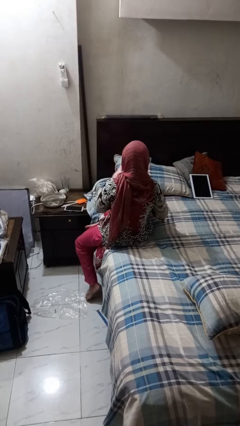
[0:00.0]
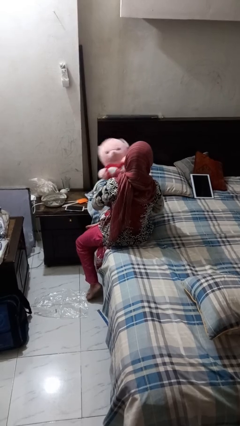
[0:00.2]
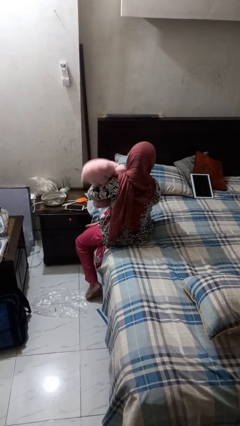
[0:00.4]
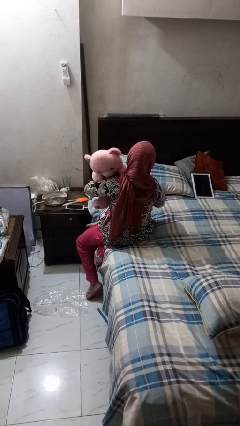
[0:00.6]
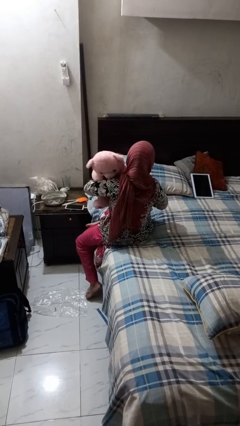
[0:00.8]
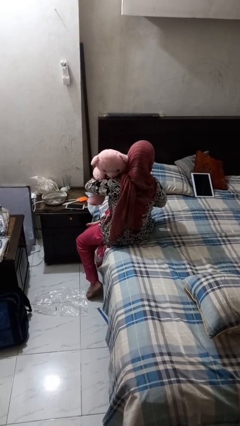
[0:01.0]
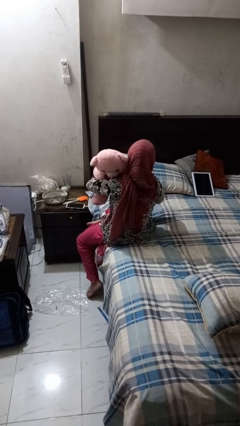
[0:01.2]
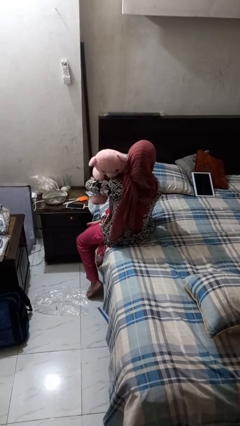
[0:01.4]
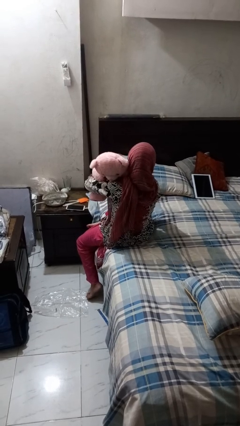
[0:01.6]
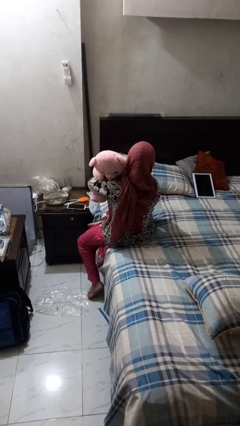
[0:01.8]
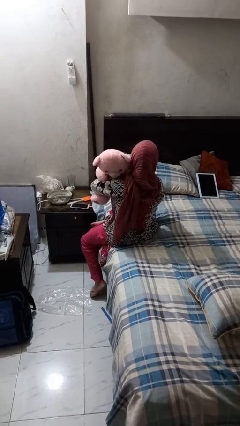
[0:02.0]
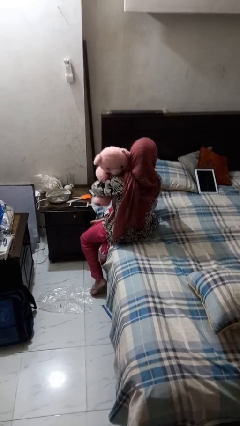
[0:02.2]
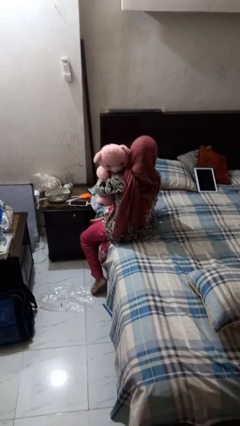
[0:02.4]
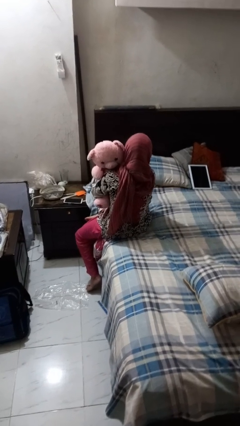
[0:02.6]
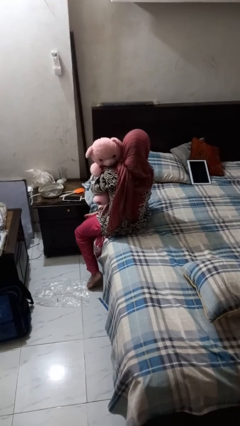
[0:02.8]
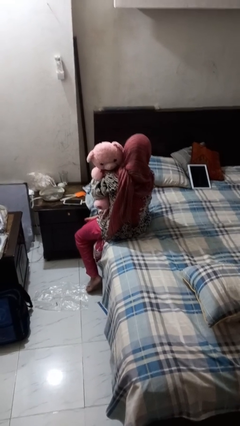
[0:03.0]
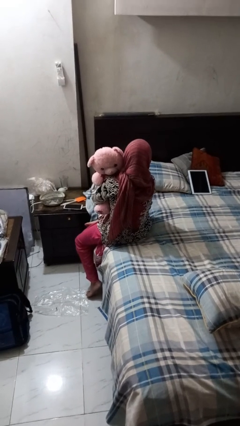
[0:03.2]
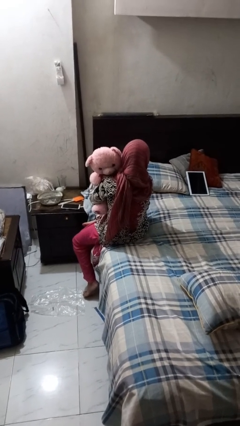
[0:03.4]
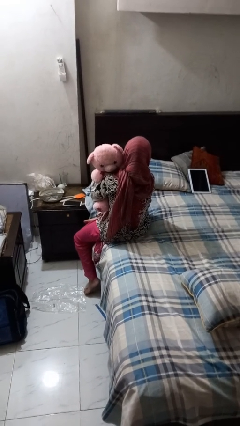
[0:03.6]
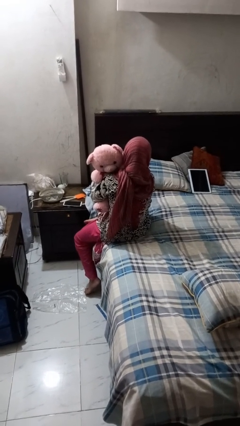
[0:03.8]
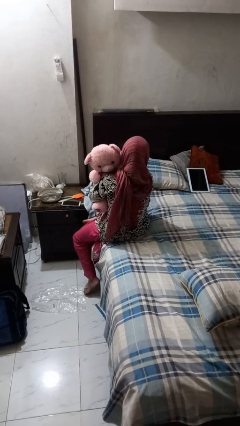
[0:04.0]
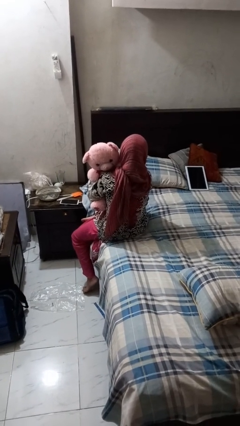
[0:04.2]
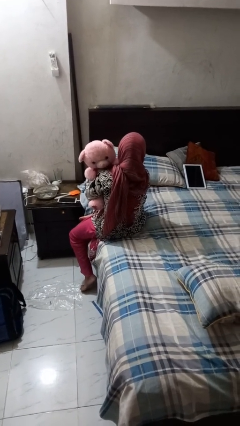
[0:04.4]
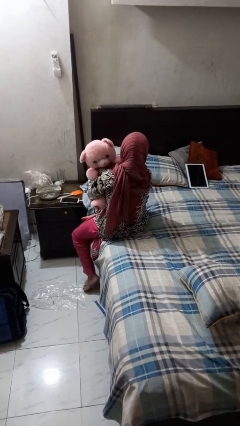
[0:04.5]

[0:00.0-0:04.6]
person hugs stuffed animal

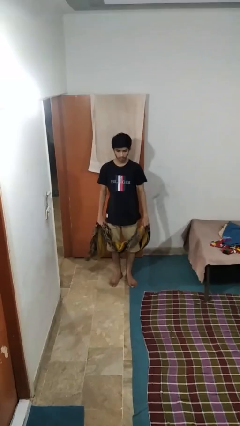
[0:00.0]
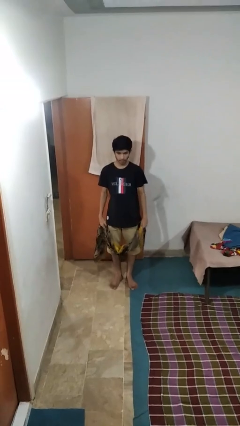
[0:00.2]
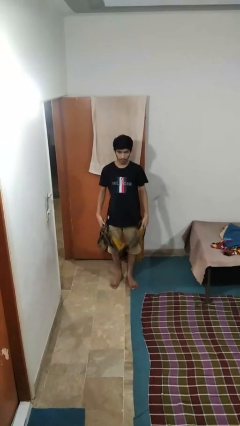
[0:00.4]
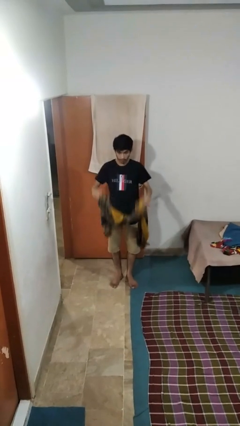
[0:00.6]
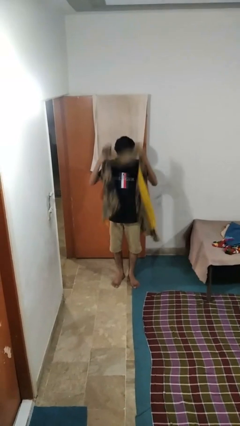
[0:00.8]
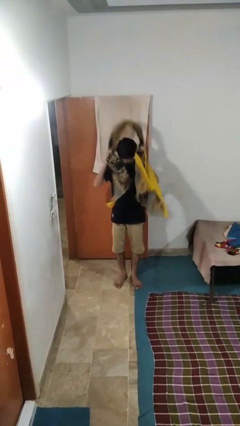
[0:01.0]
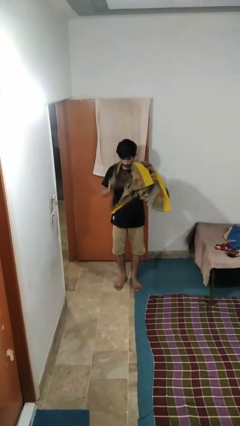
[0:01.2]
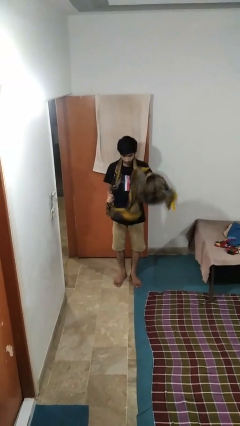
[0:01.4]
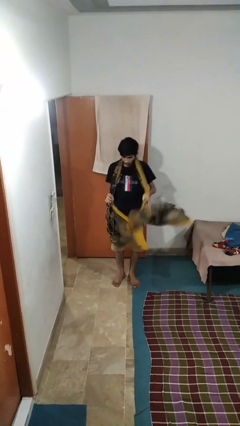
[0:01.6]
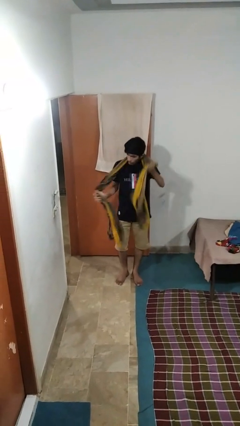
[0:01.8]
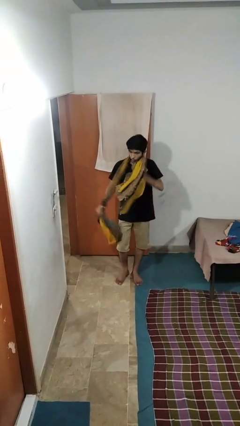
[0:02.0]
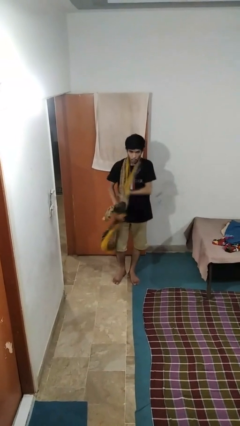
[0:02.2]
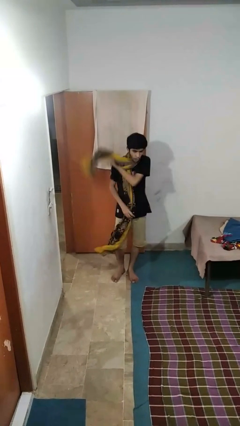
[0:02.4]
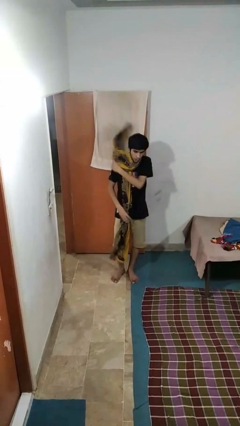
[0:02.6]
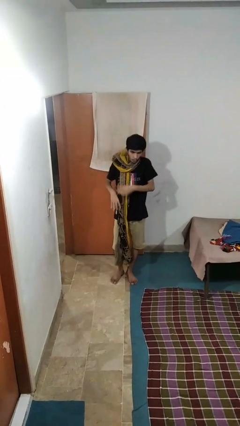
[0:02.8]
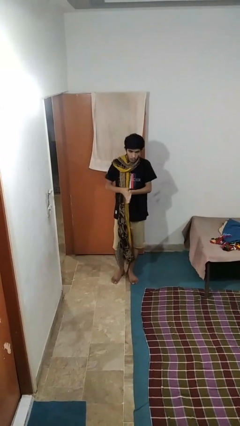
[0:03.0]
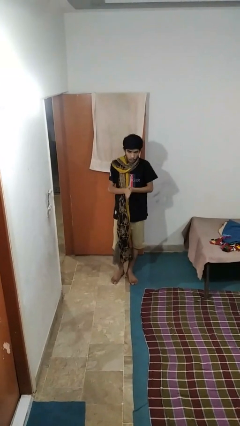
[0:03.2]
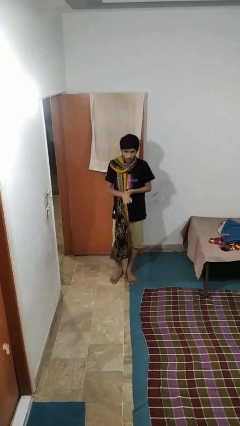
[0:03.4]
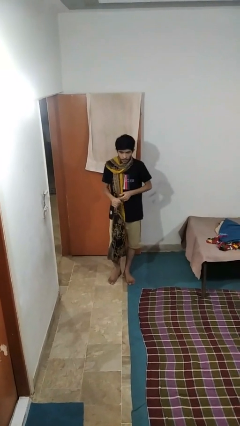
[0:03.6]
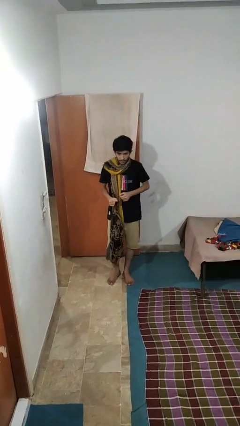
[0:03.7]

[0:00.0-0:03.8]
person puts on scarf

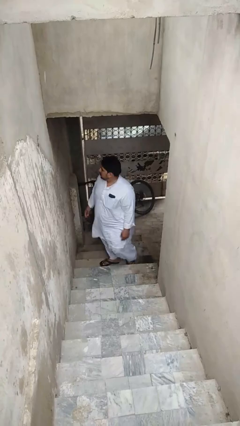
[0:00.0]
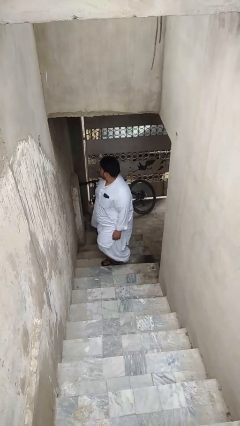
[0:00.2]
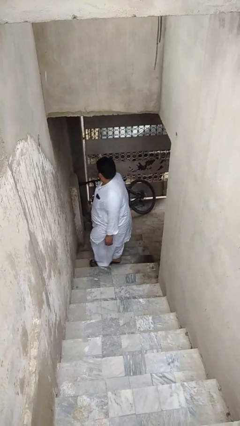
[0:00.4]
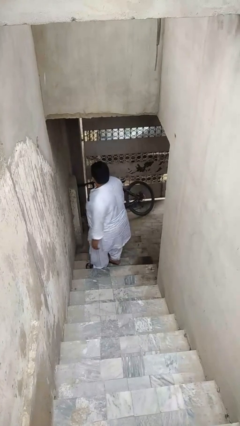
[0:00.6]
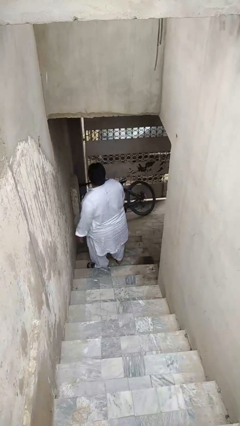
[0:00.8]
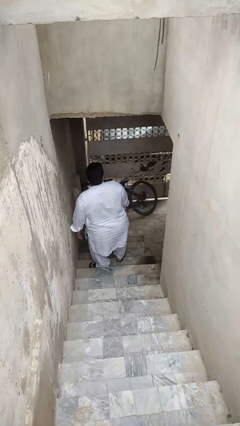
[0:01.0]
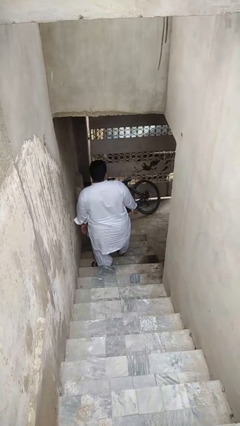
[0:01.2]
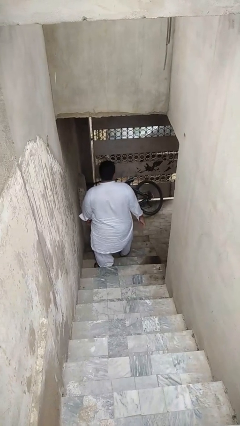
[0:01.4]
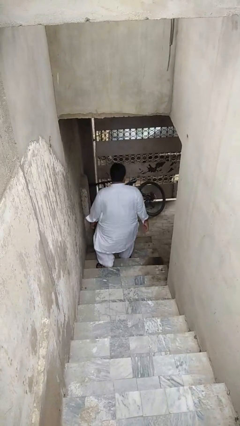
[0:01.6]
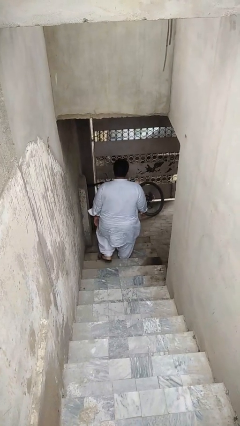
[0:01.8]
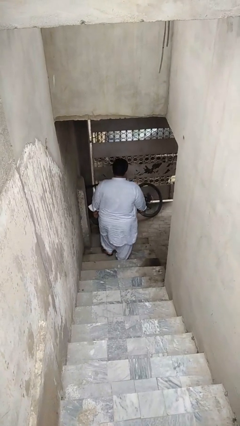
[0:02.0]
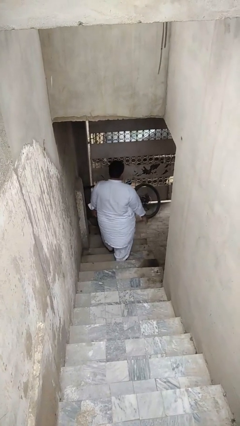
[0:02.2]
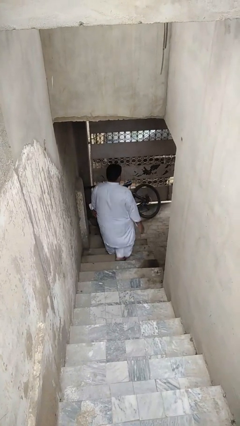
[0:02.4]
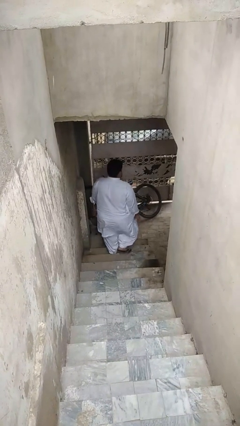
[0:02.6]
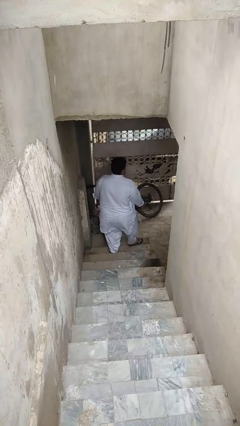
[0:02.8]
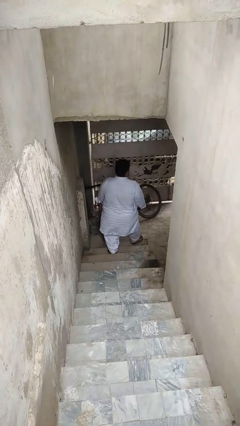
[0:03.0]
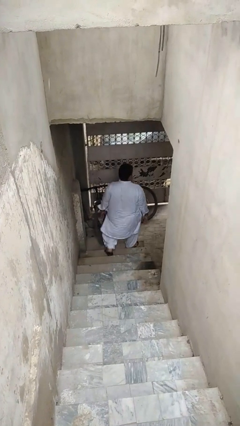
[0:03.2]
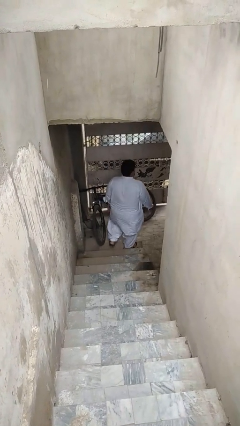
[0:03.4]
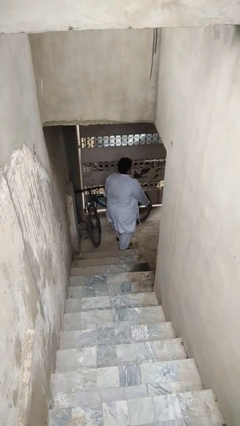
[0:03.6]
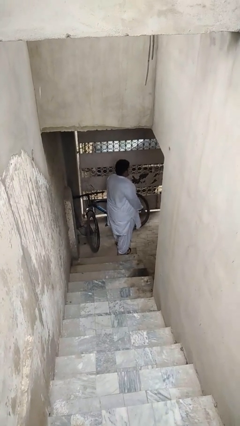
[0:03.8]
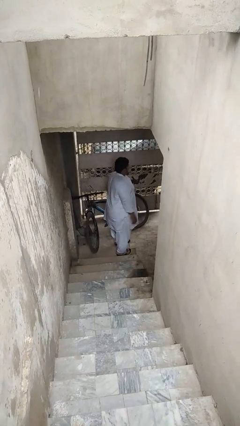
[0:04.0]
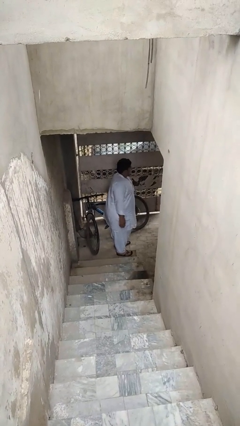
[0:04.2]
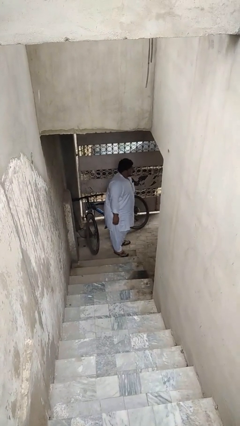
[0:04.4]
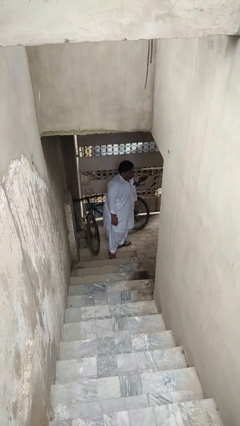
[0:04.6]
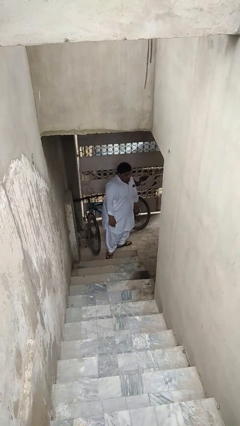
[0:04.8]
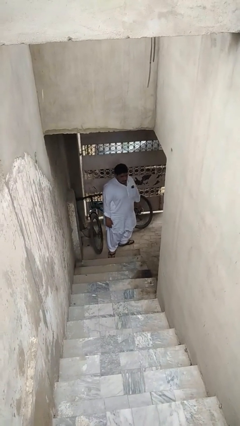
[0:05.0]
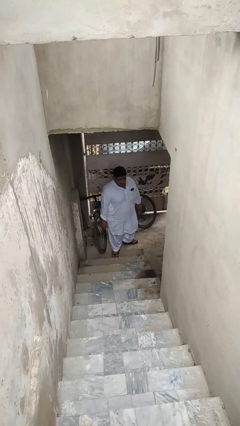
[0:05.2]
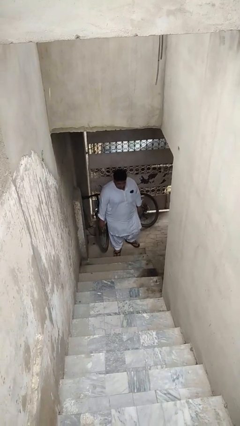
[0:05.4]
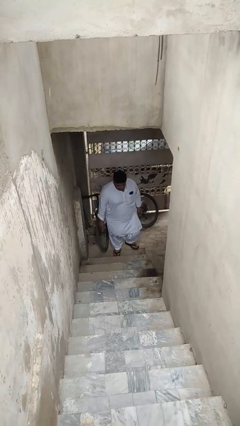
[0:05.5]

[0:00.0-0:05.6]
person climbs down stairs

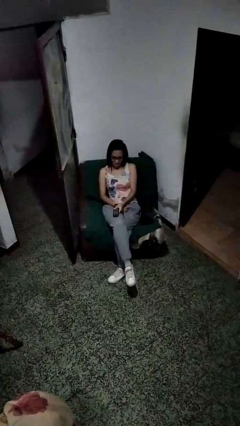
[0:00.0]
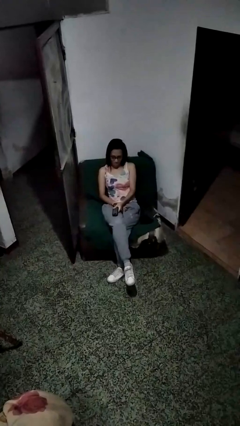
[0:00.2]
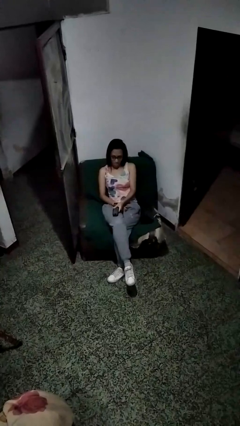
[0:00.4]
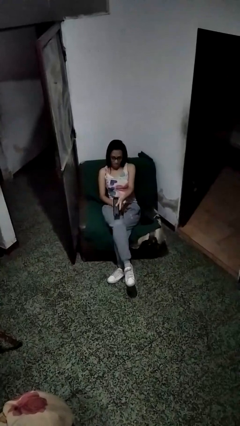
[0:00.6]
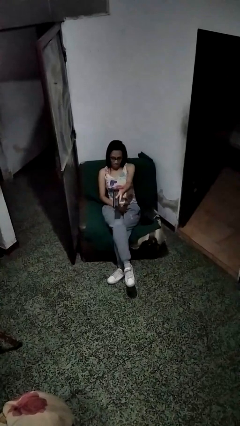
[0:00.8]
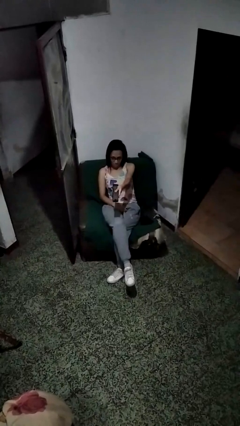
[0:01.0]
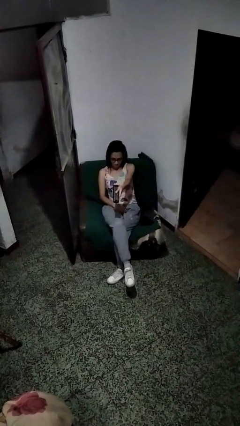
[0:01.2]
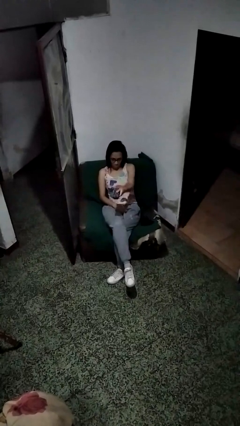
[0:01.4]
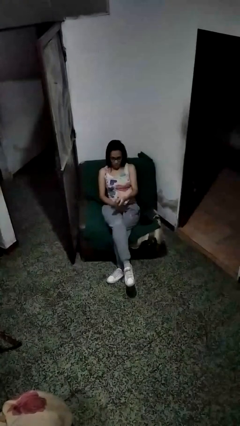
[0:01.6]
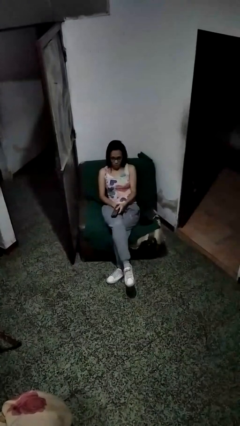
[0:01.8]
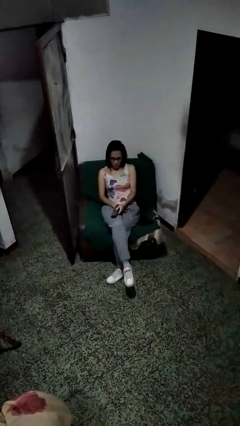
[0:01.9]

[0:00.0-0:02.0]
person uses television remote

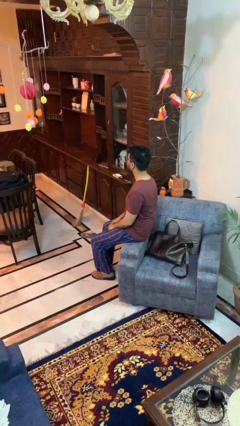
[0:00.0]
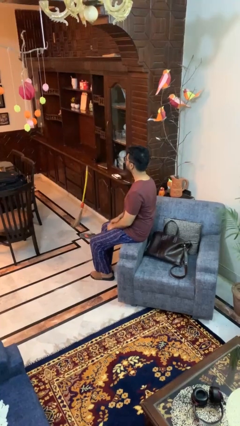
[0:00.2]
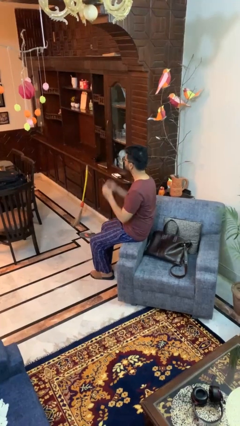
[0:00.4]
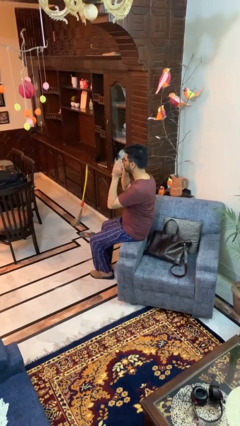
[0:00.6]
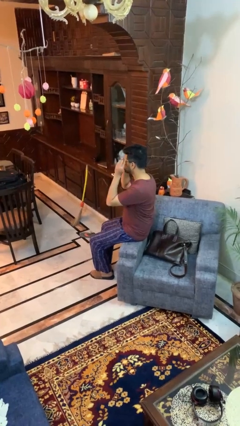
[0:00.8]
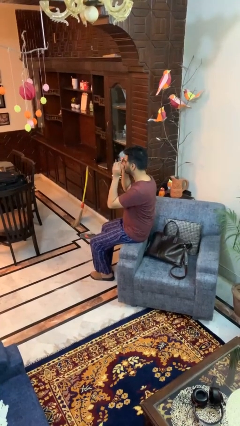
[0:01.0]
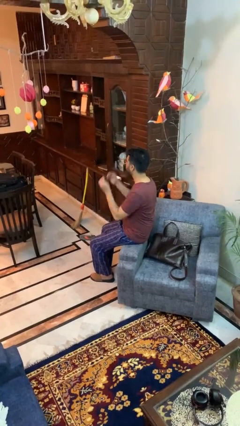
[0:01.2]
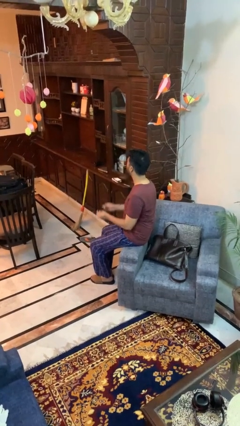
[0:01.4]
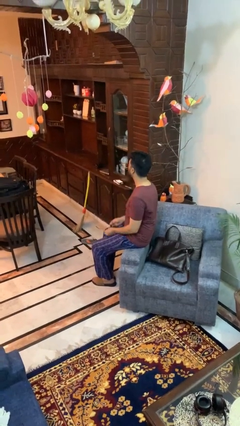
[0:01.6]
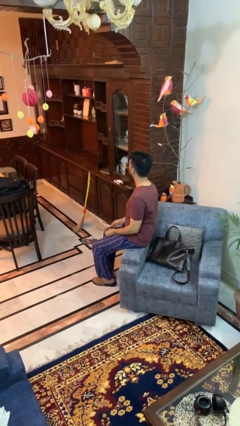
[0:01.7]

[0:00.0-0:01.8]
person takes off glasses
